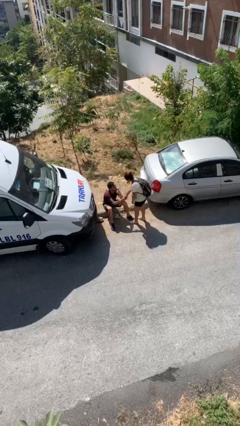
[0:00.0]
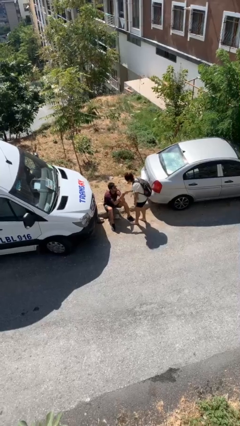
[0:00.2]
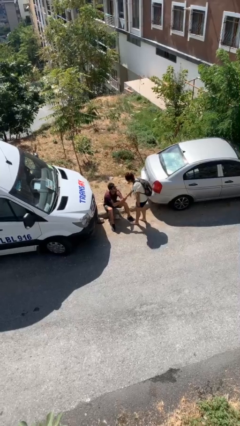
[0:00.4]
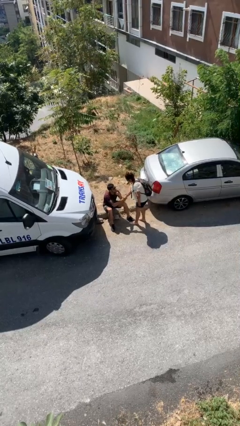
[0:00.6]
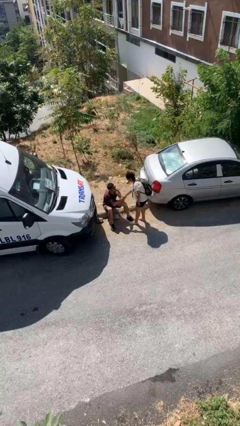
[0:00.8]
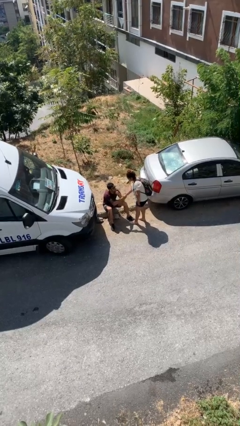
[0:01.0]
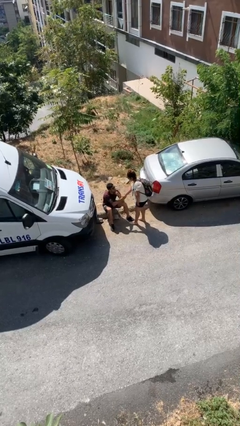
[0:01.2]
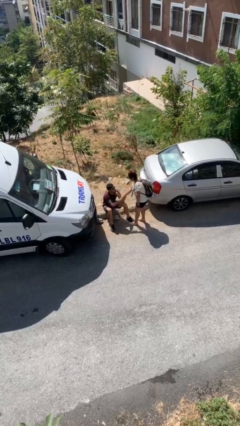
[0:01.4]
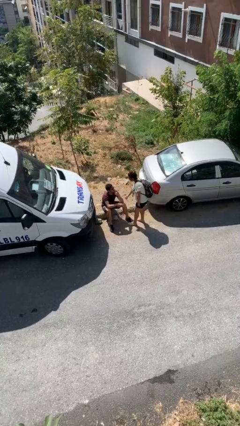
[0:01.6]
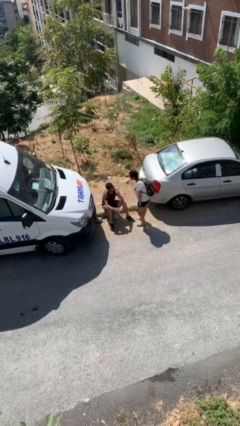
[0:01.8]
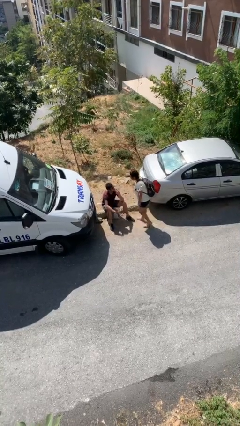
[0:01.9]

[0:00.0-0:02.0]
person shakes hand

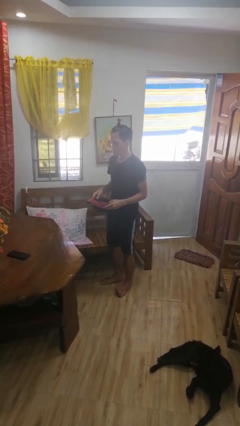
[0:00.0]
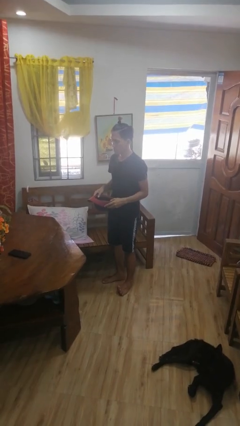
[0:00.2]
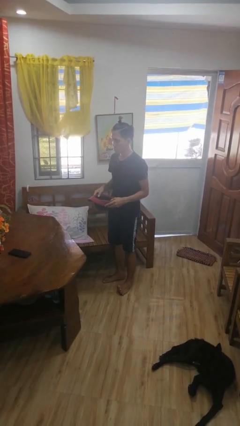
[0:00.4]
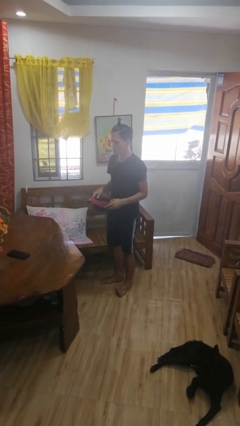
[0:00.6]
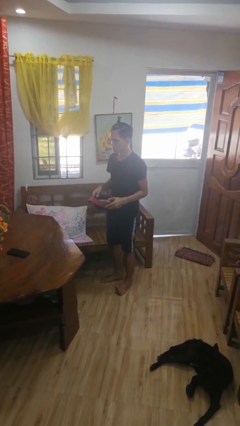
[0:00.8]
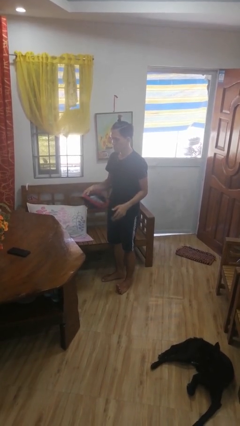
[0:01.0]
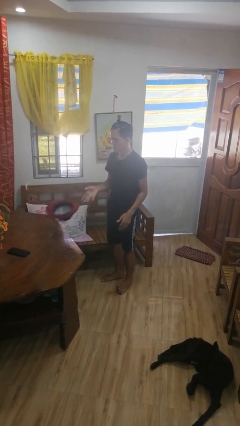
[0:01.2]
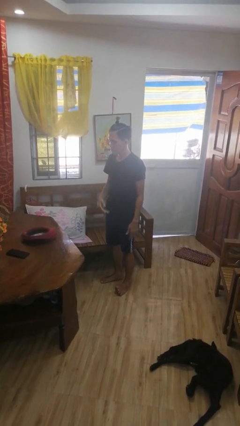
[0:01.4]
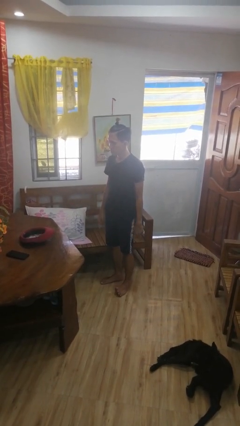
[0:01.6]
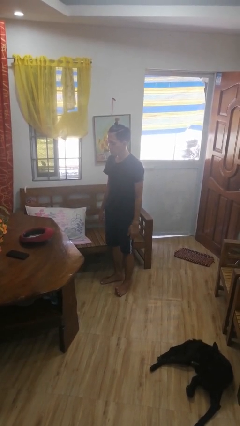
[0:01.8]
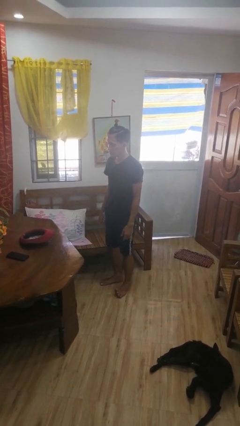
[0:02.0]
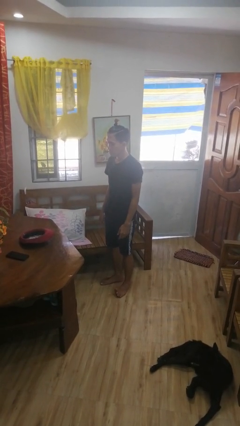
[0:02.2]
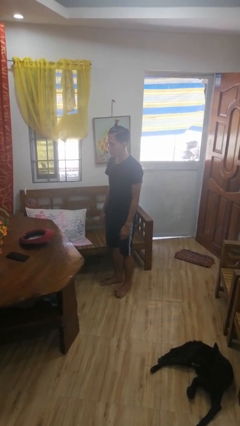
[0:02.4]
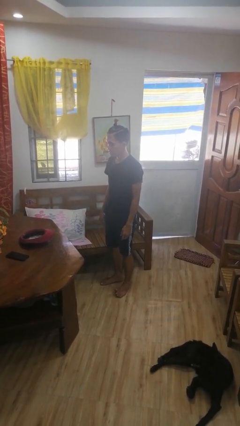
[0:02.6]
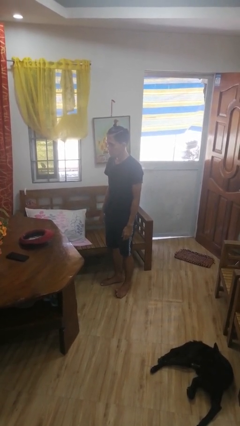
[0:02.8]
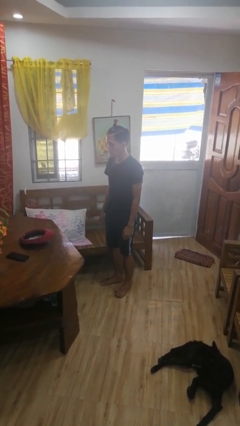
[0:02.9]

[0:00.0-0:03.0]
person throws object on table

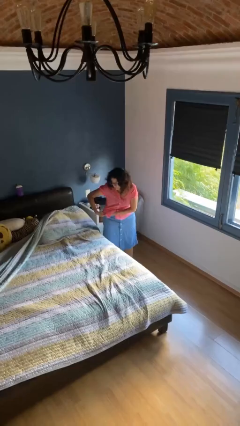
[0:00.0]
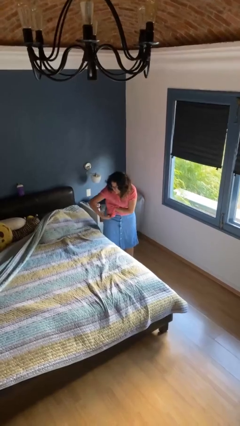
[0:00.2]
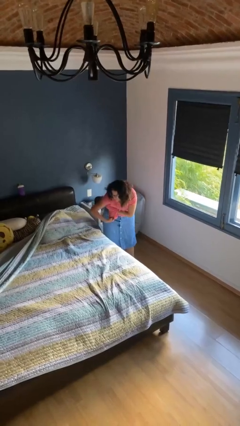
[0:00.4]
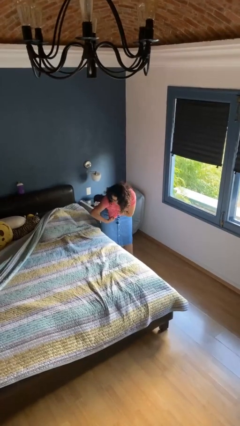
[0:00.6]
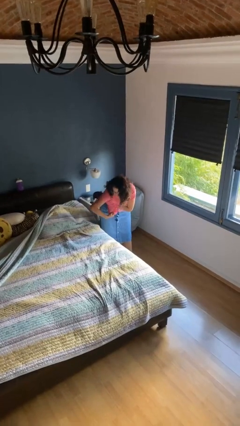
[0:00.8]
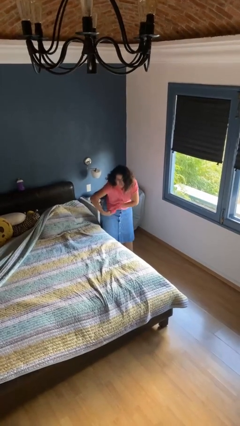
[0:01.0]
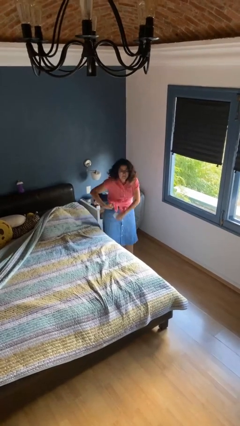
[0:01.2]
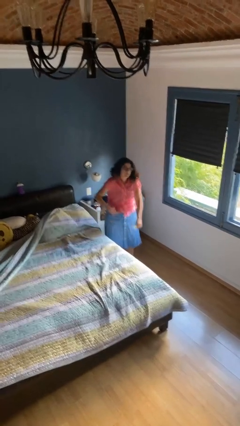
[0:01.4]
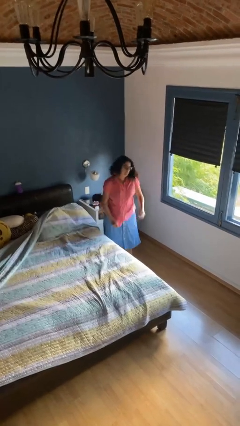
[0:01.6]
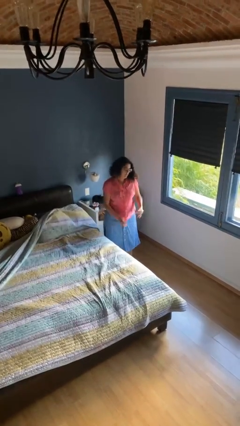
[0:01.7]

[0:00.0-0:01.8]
person applies deodorant

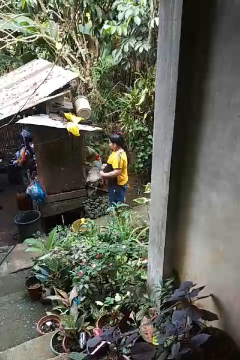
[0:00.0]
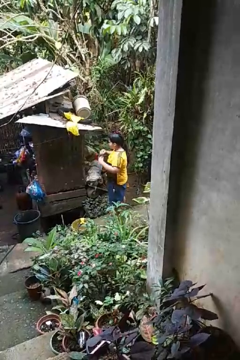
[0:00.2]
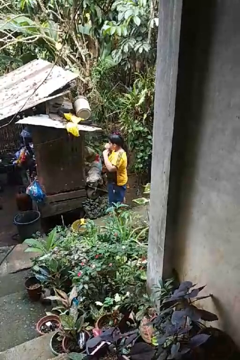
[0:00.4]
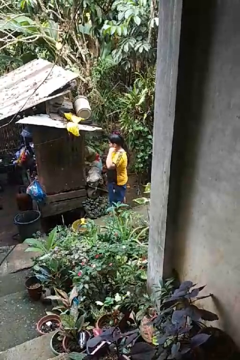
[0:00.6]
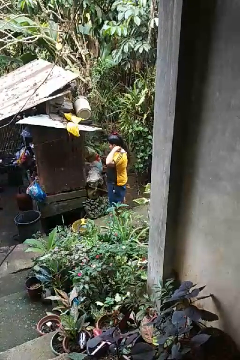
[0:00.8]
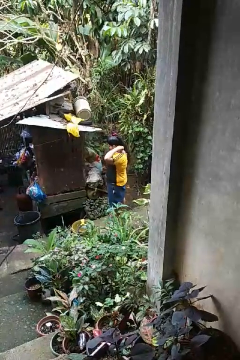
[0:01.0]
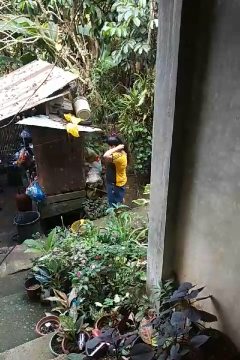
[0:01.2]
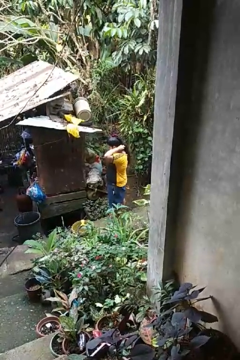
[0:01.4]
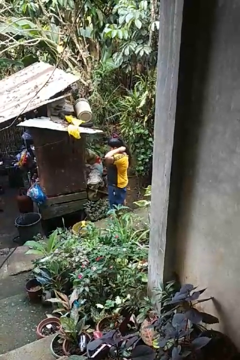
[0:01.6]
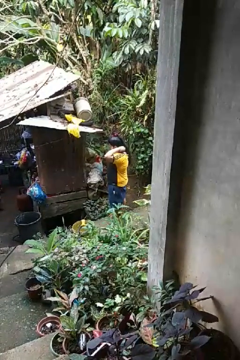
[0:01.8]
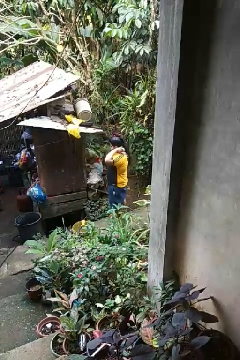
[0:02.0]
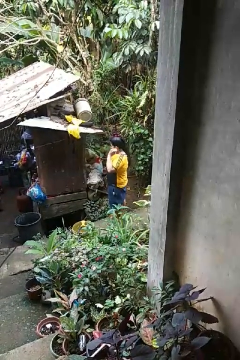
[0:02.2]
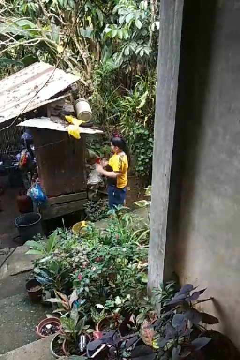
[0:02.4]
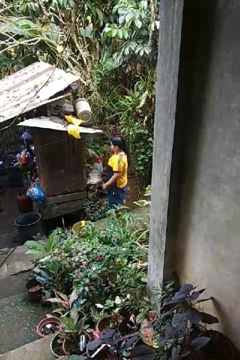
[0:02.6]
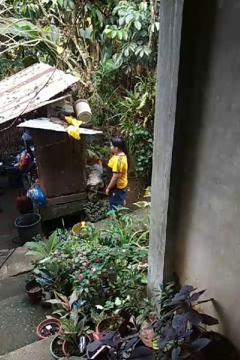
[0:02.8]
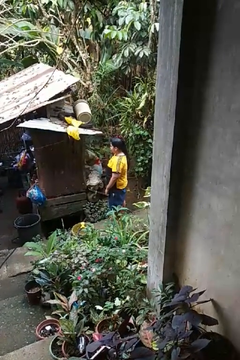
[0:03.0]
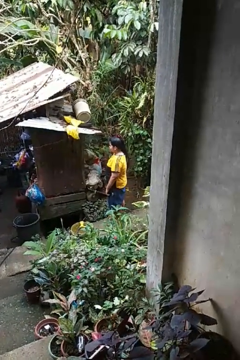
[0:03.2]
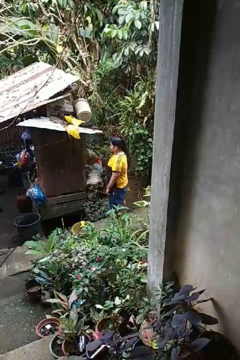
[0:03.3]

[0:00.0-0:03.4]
person puts on necklace

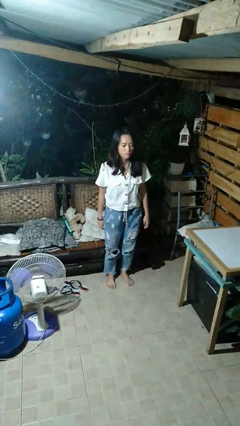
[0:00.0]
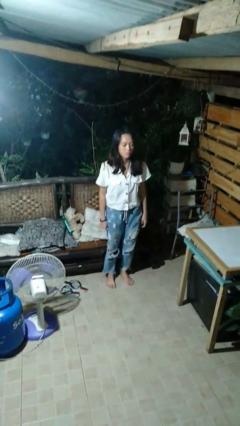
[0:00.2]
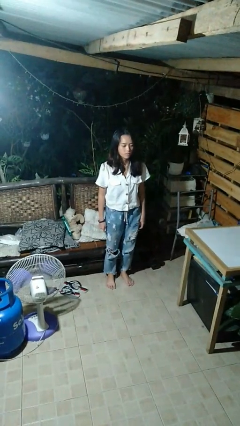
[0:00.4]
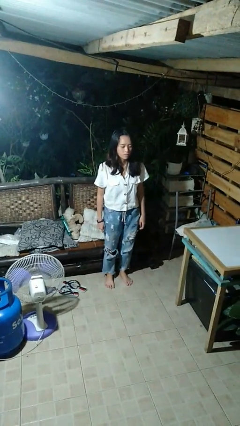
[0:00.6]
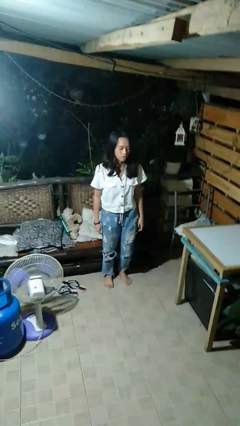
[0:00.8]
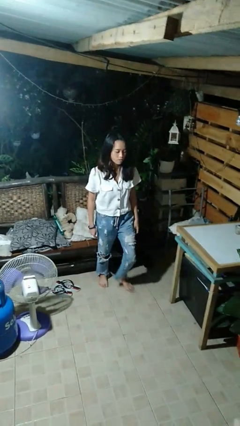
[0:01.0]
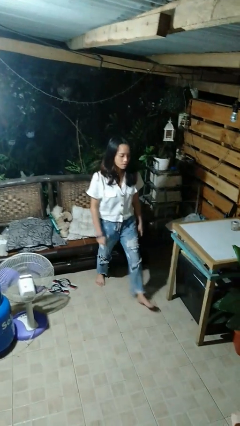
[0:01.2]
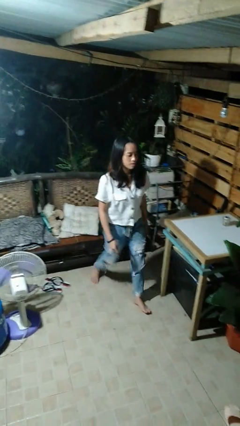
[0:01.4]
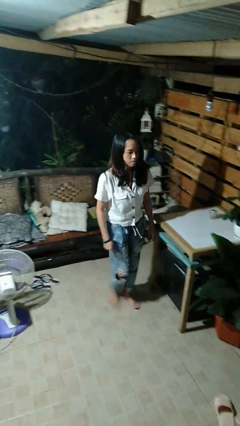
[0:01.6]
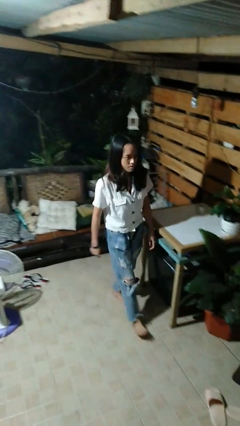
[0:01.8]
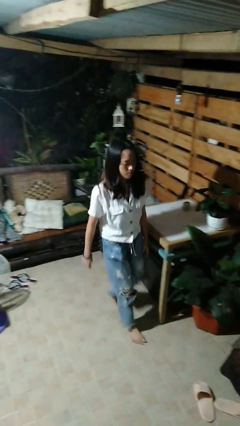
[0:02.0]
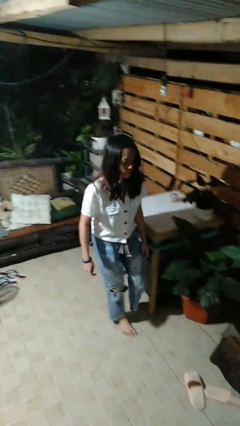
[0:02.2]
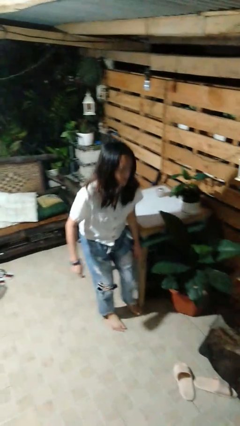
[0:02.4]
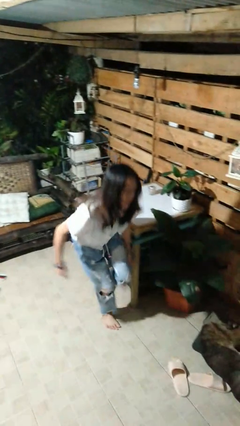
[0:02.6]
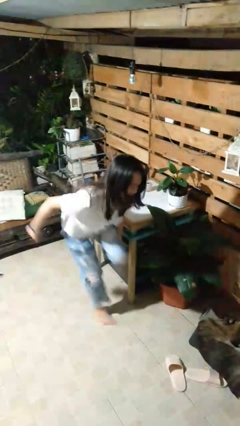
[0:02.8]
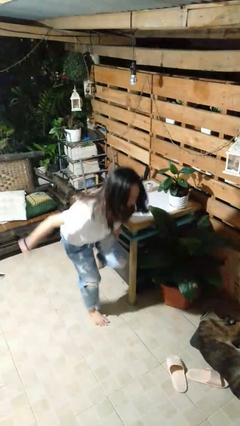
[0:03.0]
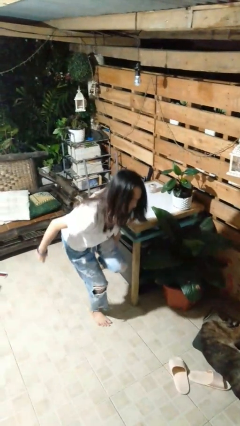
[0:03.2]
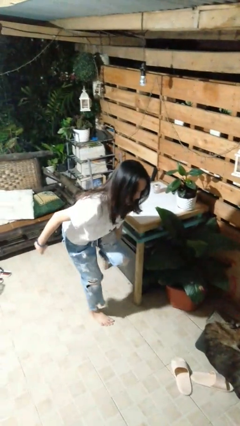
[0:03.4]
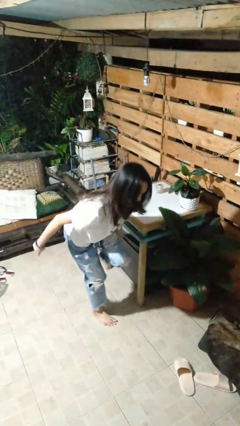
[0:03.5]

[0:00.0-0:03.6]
person stubs toe

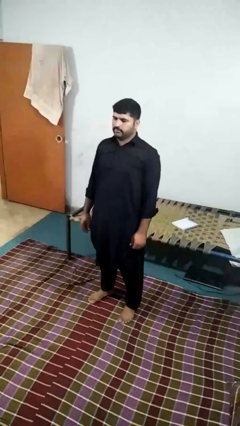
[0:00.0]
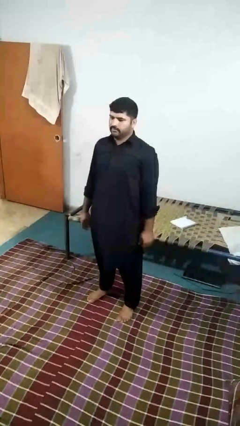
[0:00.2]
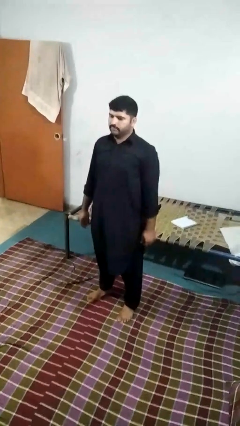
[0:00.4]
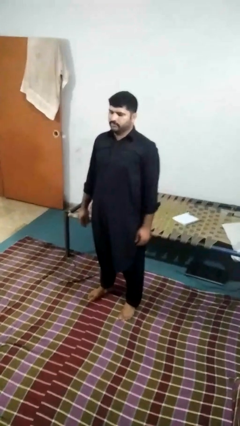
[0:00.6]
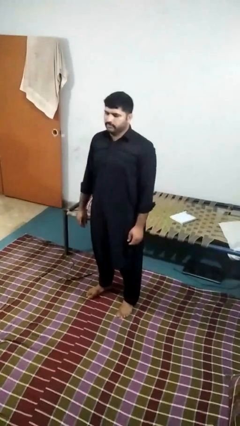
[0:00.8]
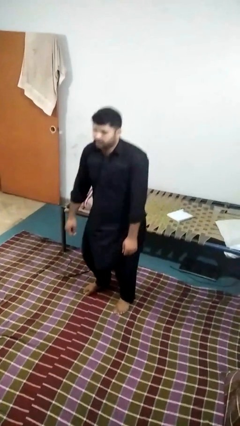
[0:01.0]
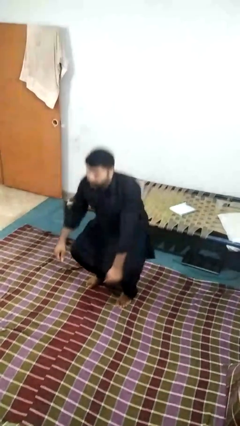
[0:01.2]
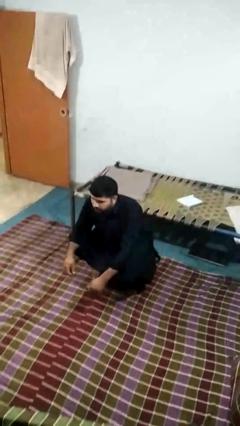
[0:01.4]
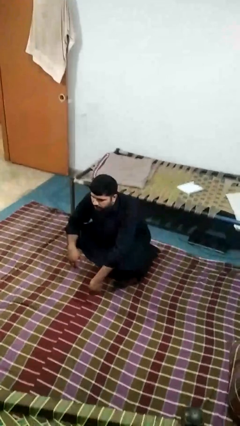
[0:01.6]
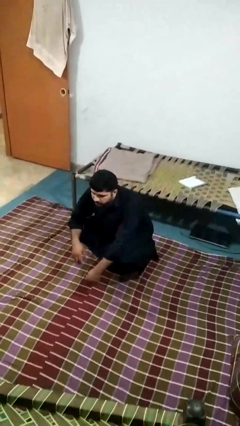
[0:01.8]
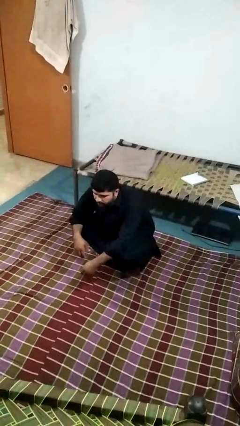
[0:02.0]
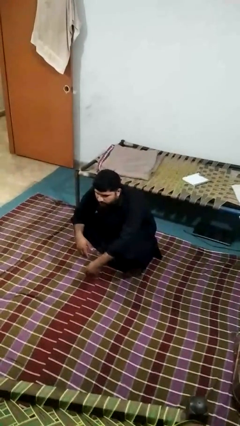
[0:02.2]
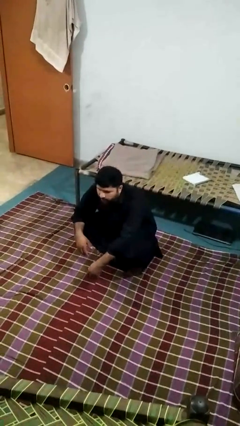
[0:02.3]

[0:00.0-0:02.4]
person squats

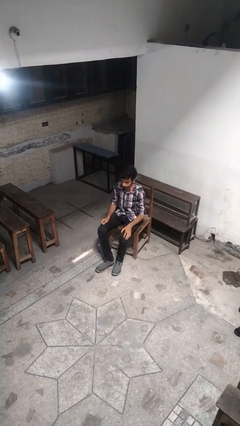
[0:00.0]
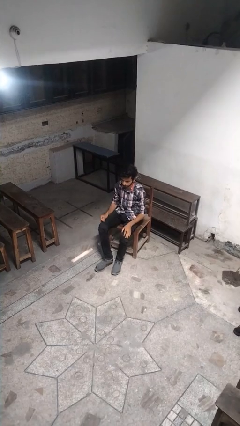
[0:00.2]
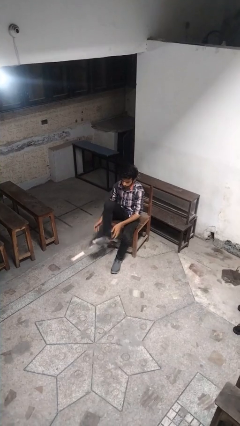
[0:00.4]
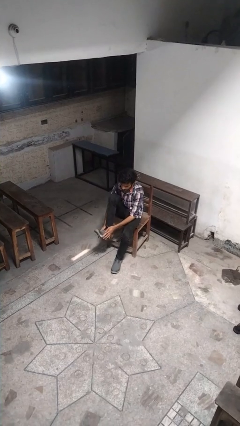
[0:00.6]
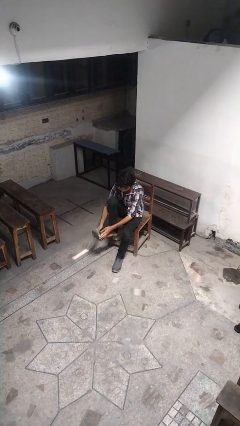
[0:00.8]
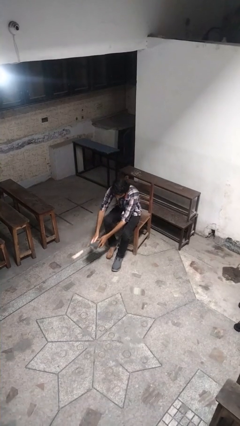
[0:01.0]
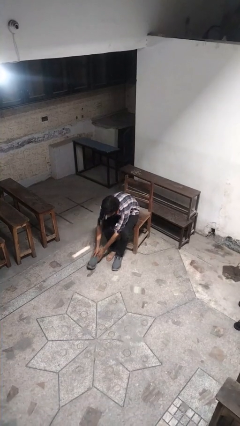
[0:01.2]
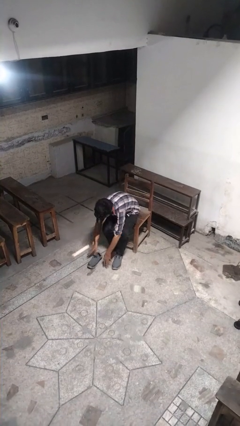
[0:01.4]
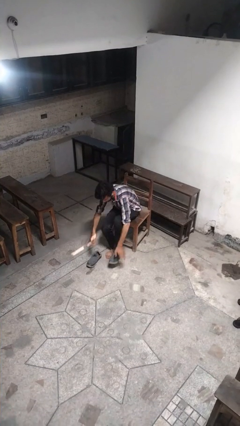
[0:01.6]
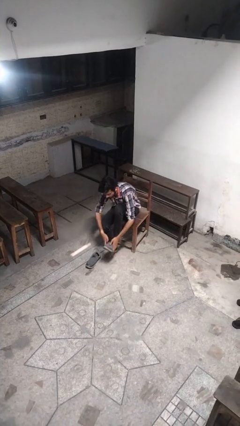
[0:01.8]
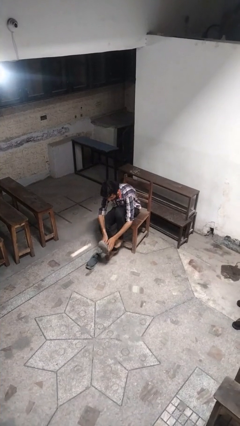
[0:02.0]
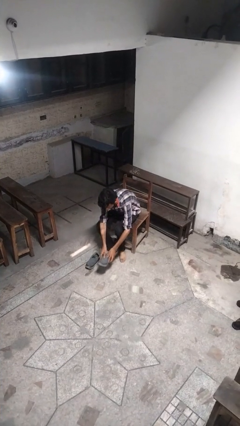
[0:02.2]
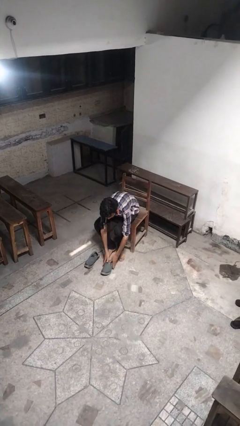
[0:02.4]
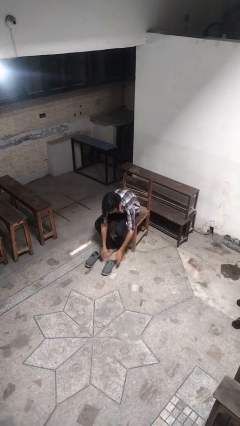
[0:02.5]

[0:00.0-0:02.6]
person takes off shoes
